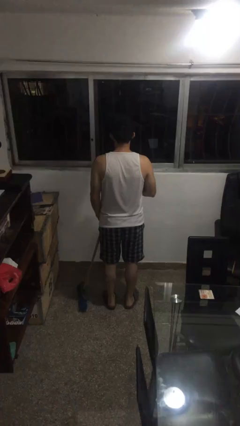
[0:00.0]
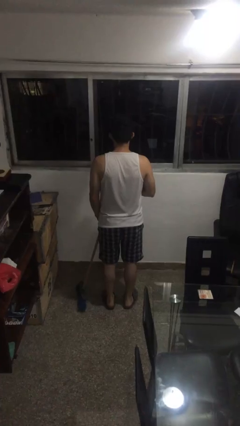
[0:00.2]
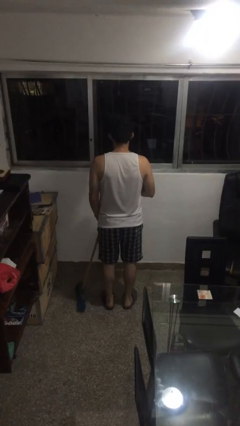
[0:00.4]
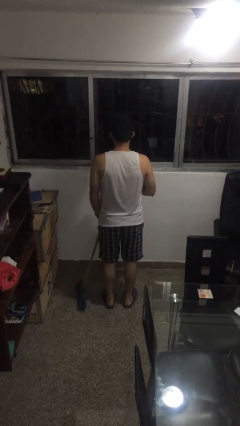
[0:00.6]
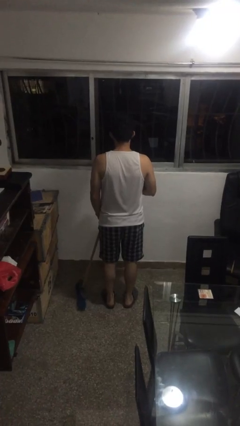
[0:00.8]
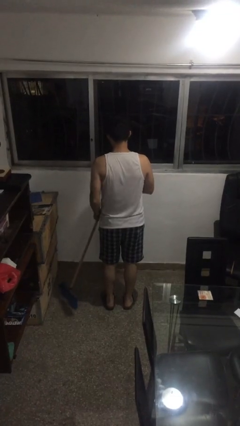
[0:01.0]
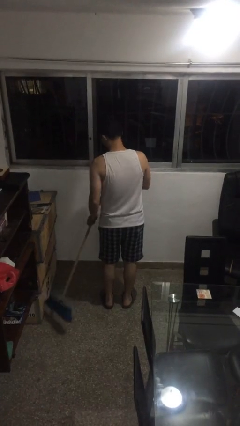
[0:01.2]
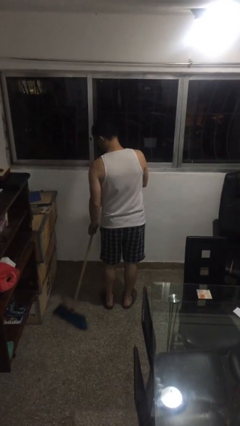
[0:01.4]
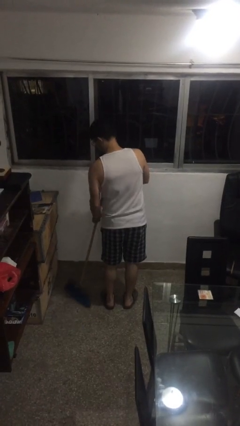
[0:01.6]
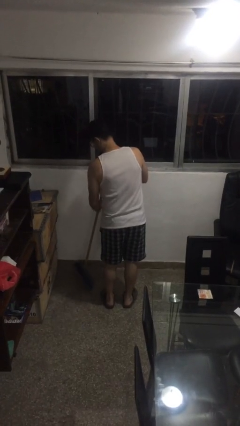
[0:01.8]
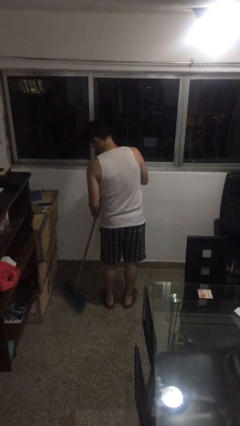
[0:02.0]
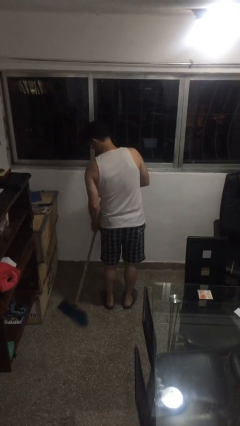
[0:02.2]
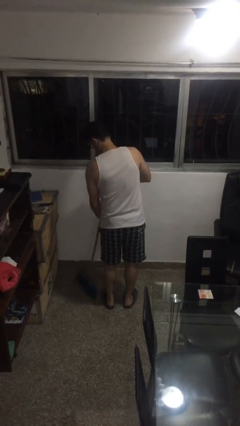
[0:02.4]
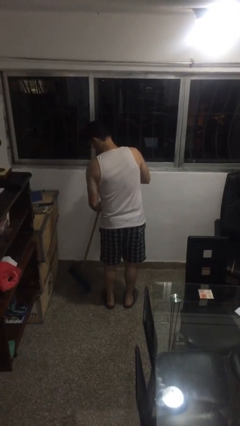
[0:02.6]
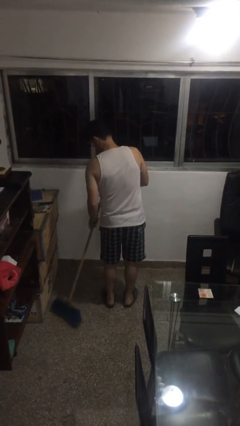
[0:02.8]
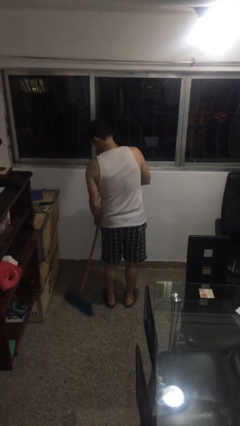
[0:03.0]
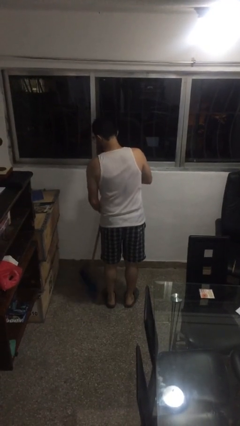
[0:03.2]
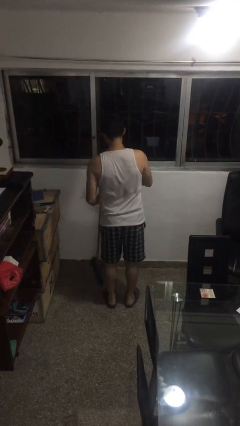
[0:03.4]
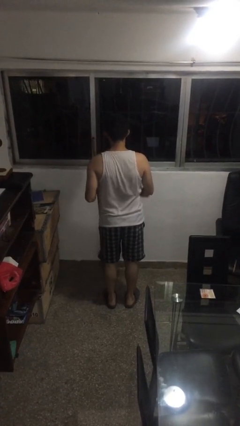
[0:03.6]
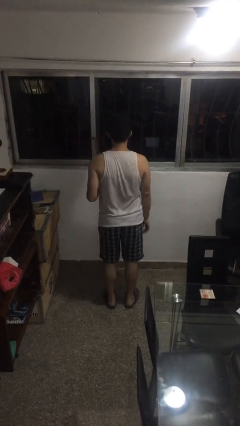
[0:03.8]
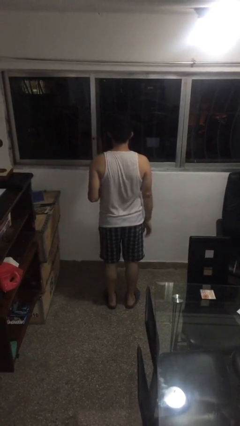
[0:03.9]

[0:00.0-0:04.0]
person sweeps floor

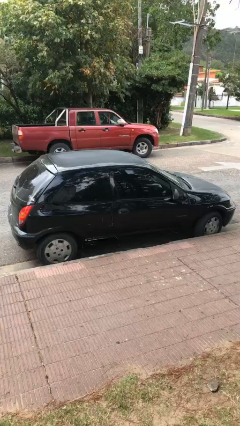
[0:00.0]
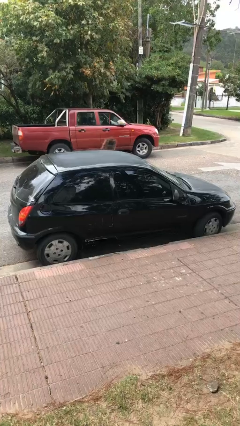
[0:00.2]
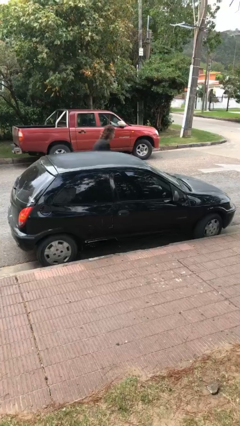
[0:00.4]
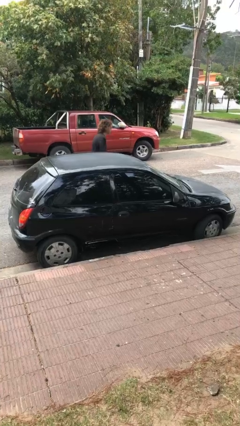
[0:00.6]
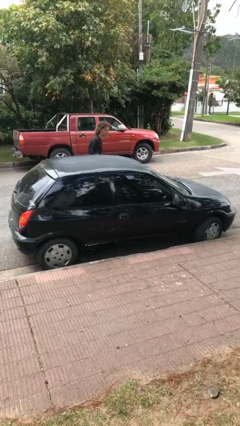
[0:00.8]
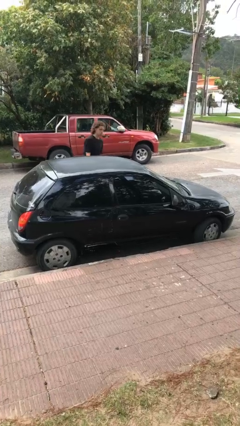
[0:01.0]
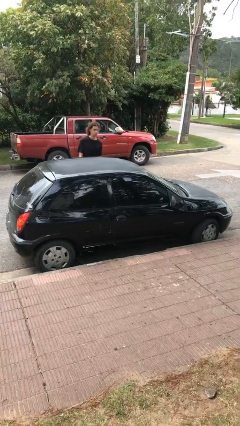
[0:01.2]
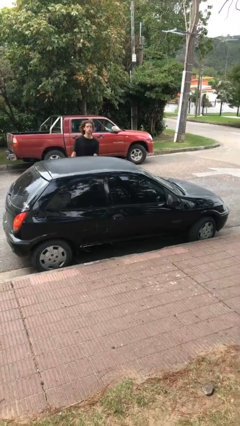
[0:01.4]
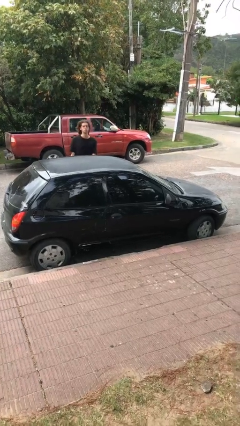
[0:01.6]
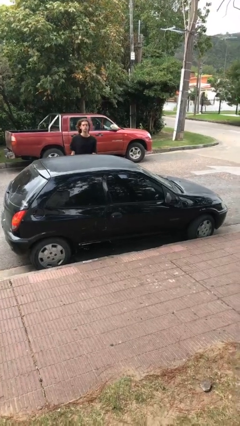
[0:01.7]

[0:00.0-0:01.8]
car drops off person

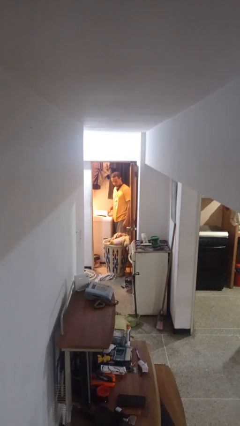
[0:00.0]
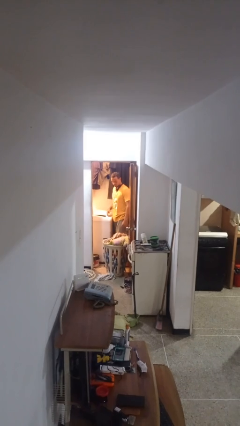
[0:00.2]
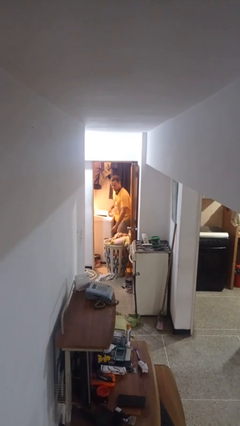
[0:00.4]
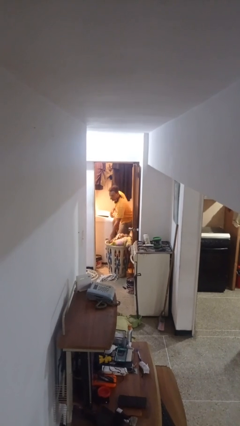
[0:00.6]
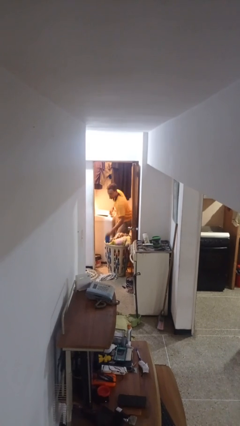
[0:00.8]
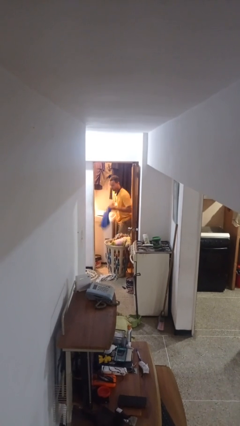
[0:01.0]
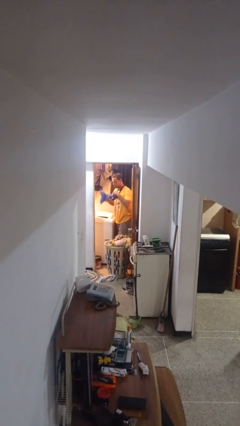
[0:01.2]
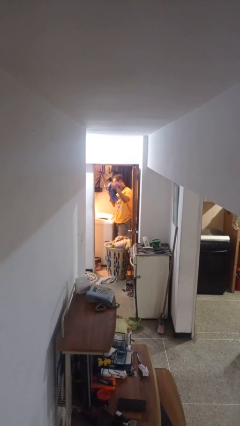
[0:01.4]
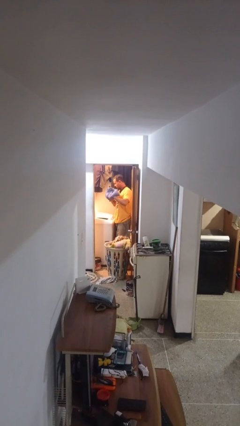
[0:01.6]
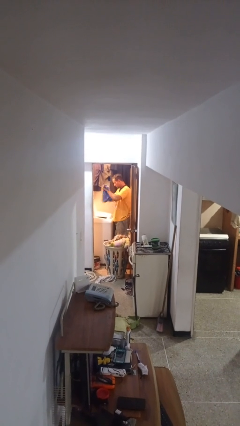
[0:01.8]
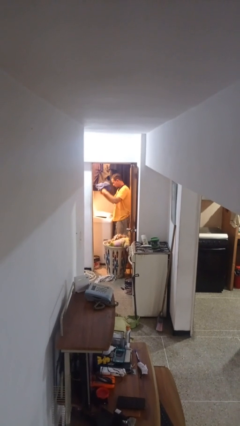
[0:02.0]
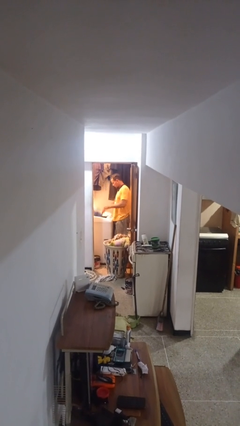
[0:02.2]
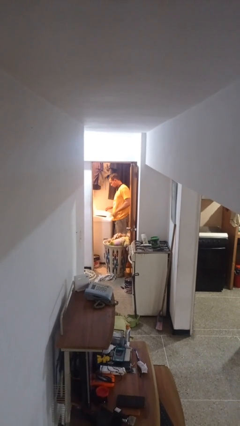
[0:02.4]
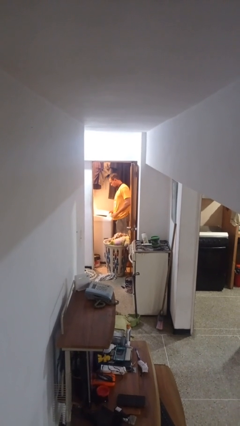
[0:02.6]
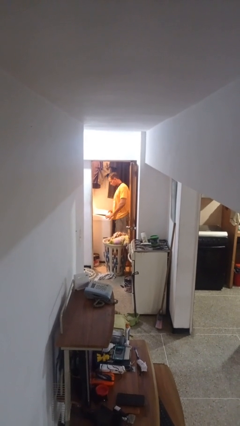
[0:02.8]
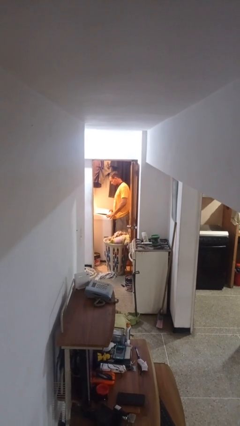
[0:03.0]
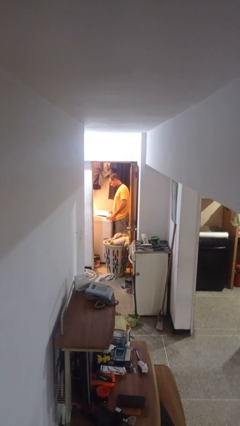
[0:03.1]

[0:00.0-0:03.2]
person loads clotheswasher

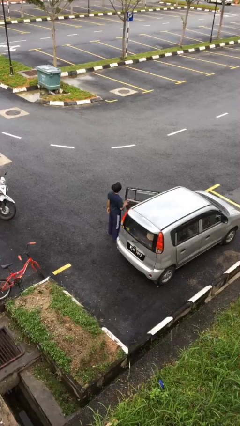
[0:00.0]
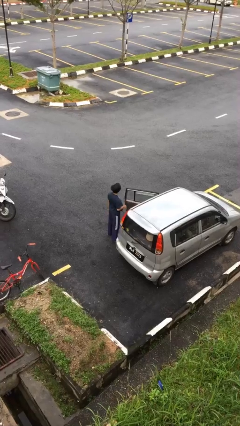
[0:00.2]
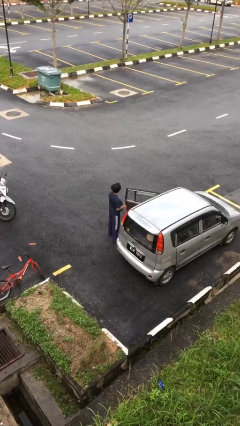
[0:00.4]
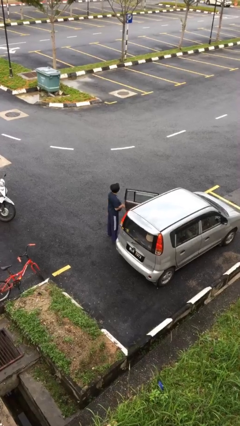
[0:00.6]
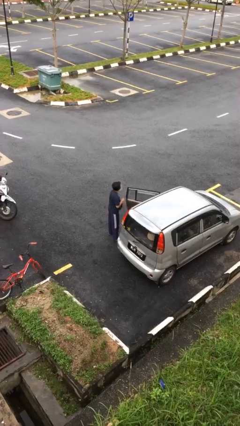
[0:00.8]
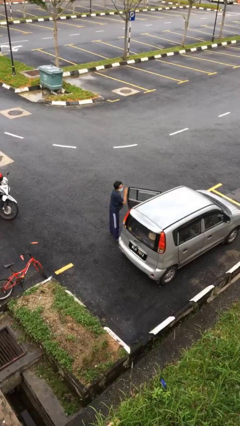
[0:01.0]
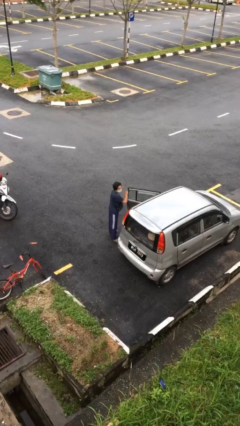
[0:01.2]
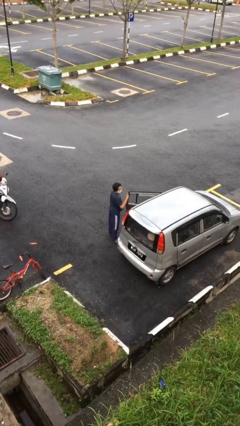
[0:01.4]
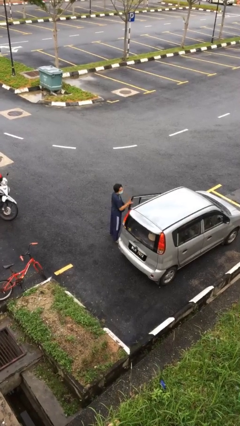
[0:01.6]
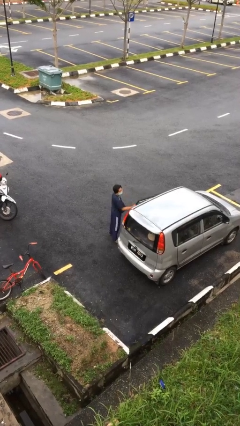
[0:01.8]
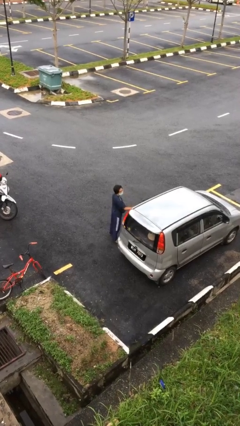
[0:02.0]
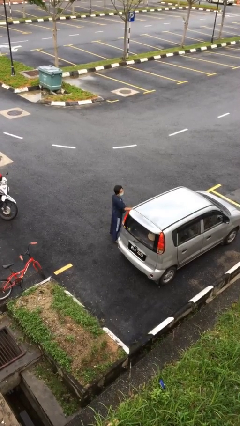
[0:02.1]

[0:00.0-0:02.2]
person closes car door

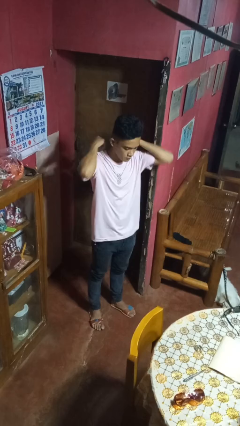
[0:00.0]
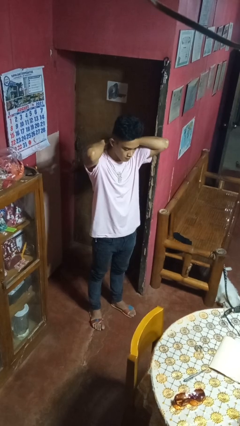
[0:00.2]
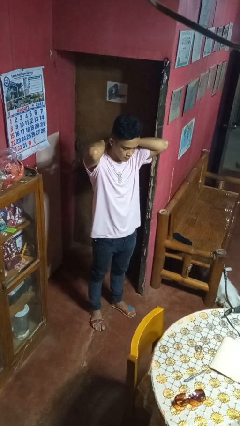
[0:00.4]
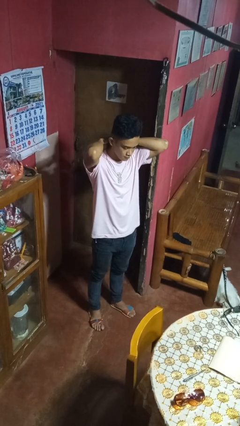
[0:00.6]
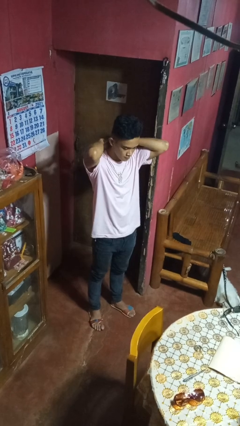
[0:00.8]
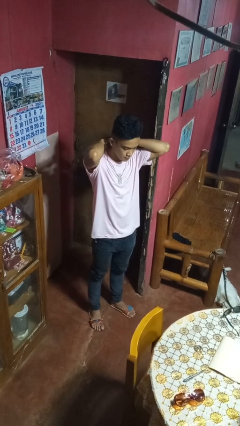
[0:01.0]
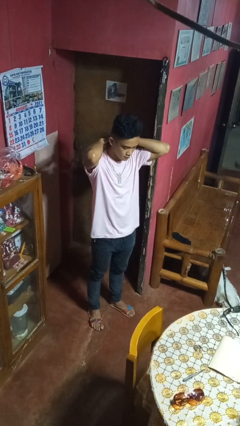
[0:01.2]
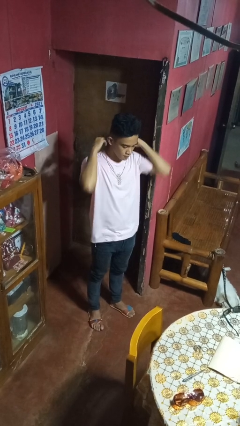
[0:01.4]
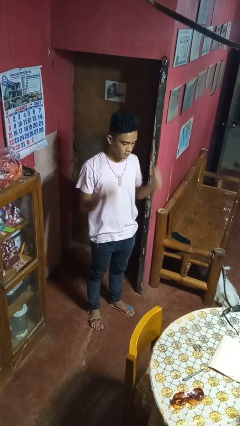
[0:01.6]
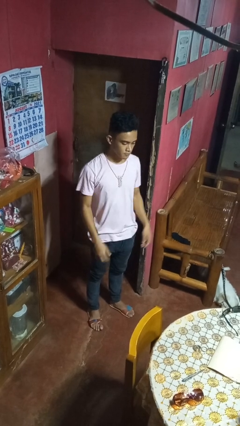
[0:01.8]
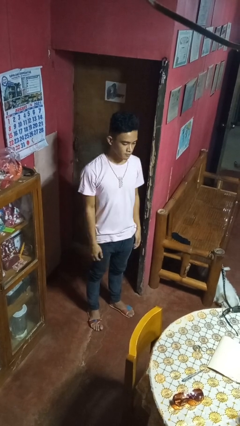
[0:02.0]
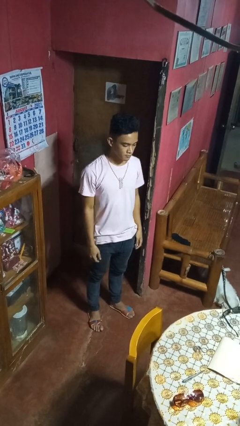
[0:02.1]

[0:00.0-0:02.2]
person puts on necklace

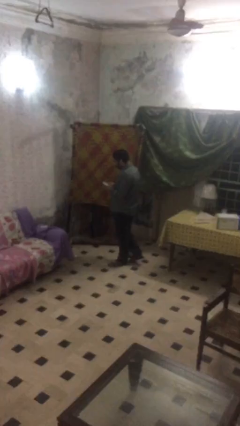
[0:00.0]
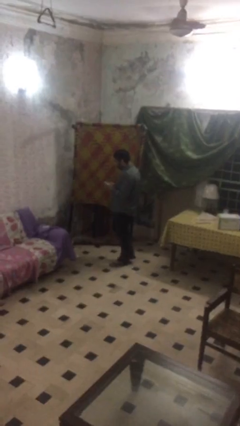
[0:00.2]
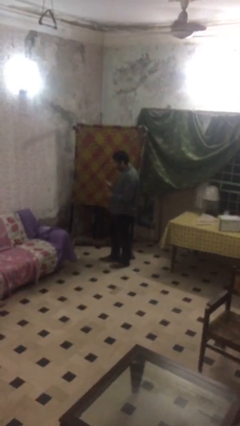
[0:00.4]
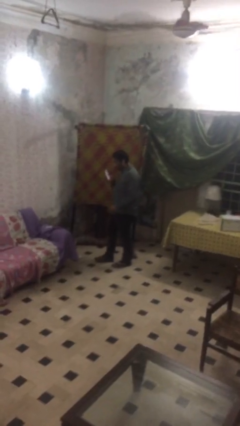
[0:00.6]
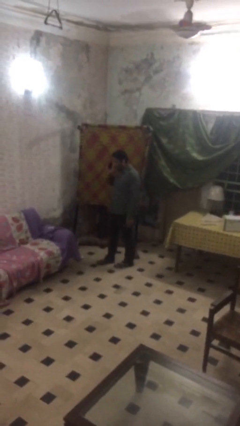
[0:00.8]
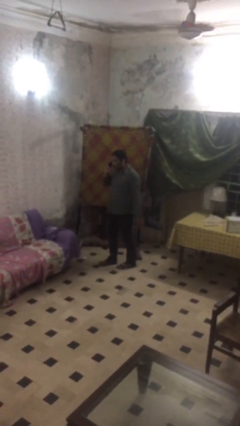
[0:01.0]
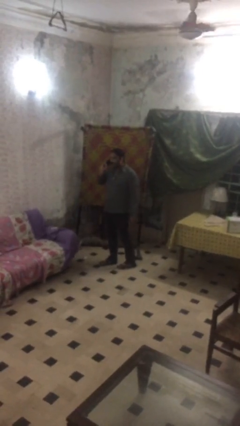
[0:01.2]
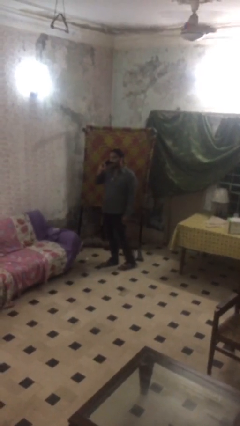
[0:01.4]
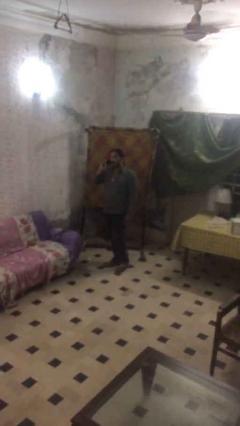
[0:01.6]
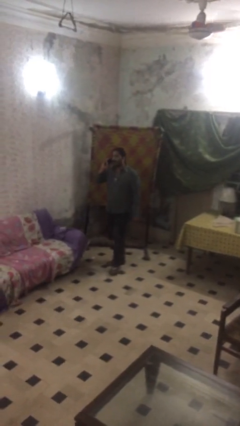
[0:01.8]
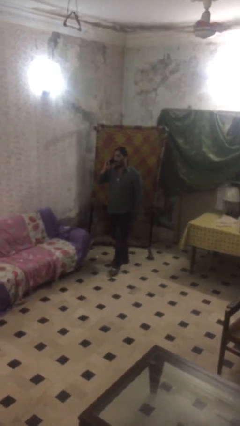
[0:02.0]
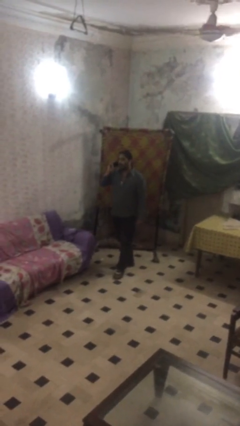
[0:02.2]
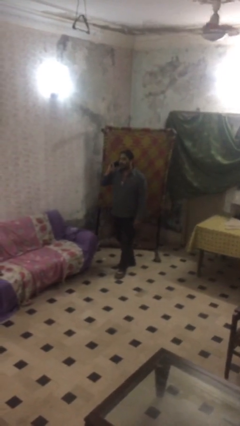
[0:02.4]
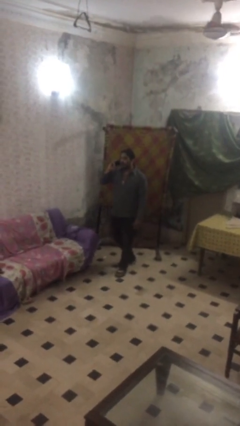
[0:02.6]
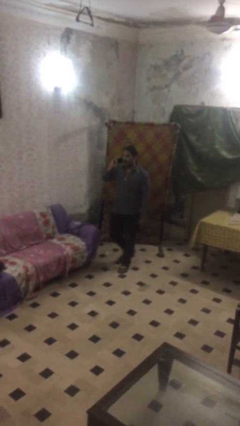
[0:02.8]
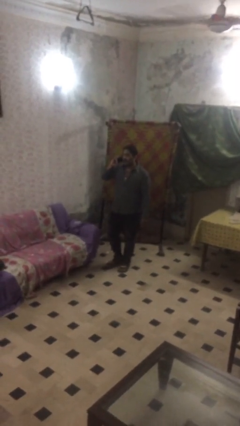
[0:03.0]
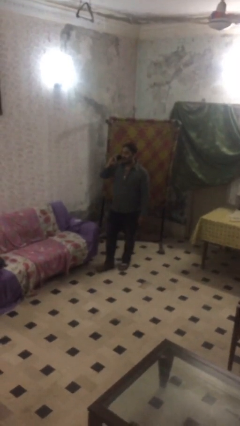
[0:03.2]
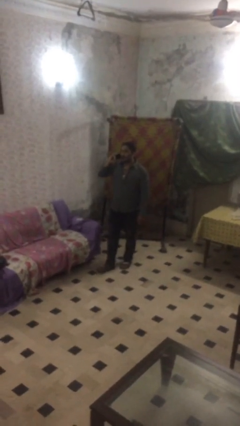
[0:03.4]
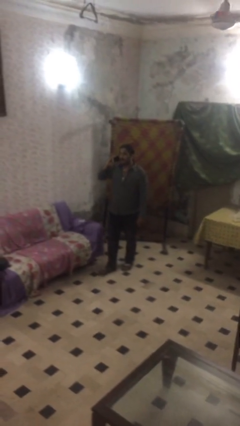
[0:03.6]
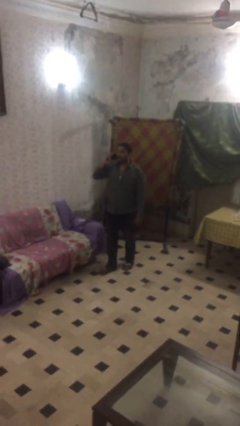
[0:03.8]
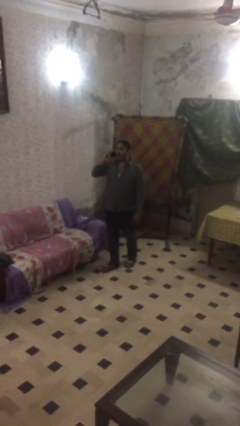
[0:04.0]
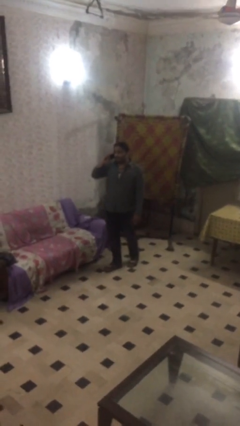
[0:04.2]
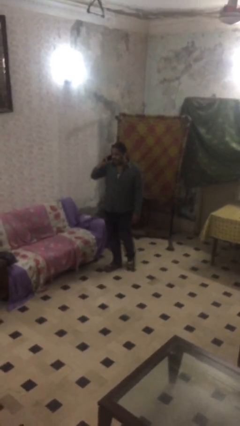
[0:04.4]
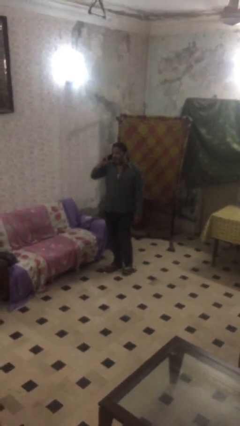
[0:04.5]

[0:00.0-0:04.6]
person talks on phone
